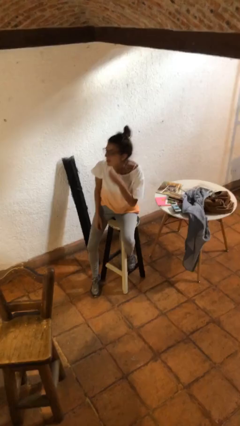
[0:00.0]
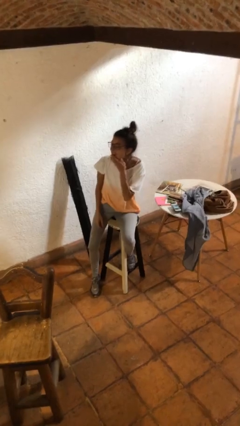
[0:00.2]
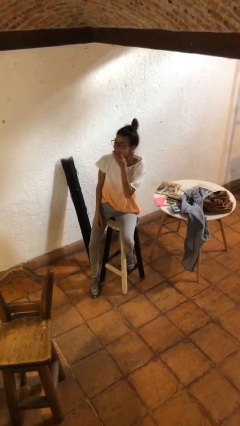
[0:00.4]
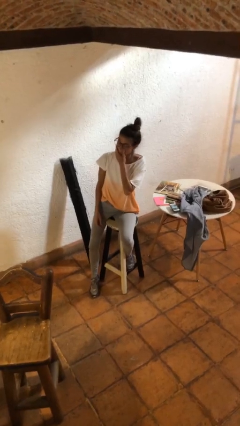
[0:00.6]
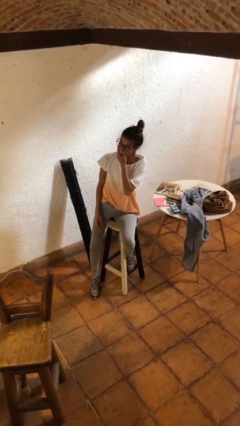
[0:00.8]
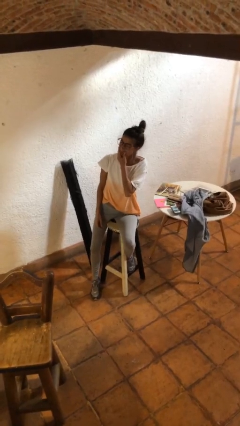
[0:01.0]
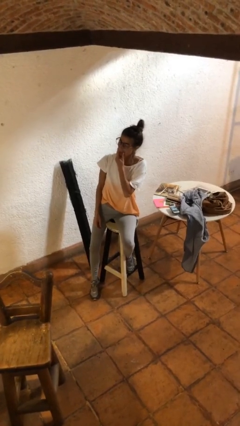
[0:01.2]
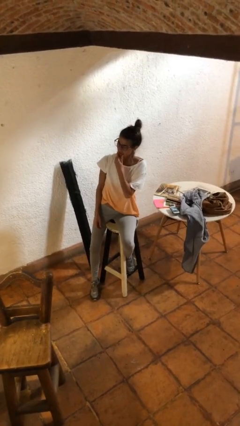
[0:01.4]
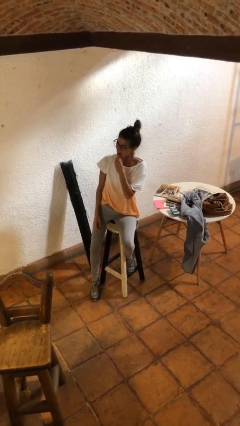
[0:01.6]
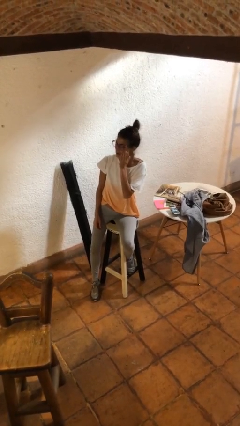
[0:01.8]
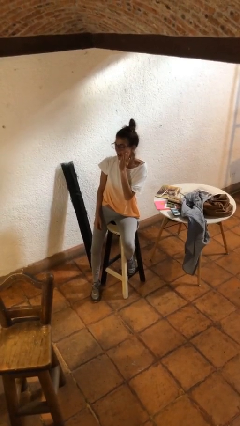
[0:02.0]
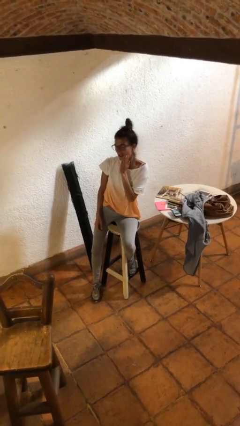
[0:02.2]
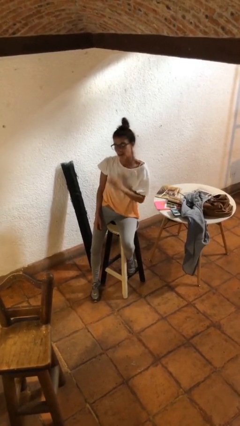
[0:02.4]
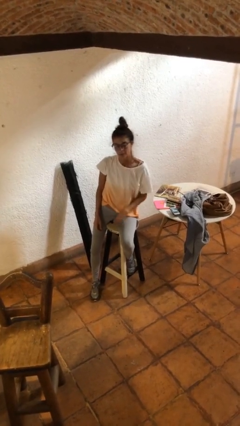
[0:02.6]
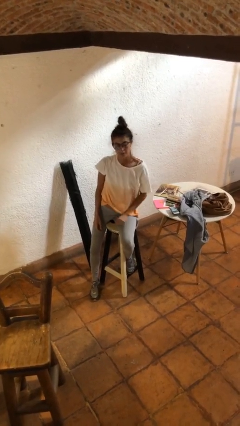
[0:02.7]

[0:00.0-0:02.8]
person scratches face

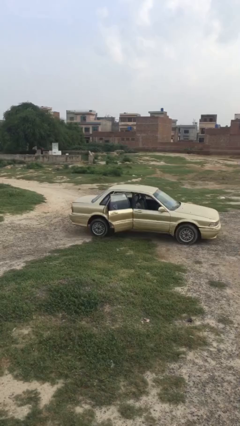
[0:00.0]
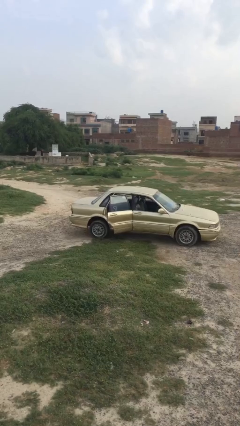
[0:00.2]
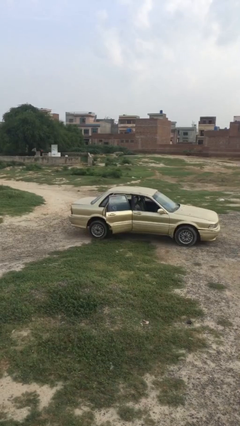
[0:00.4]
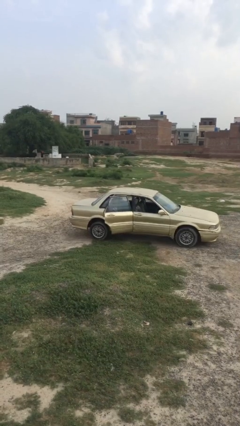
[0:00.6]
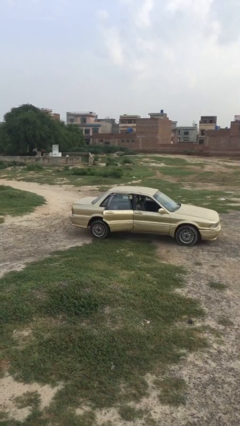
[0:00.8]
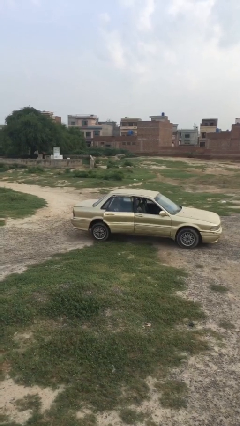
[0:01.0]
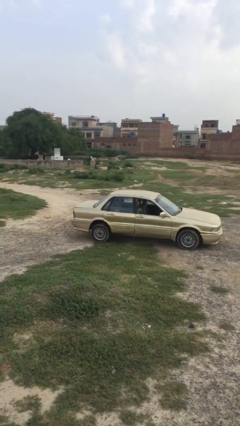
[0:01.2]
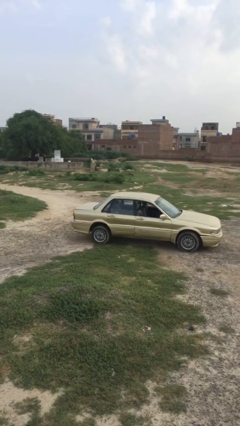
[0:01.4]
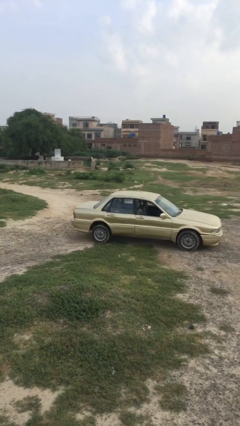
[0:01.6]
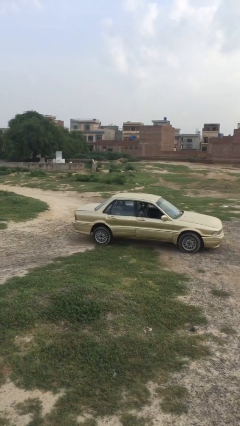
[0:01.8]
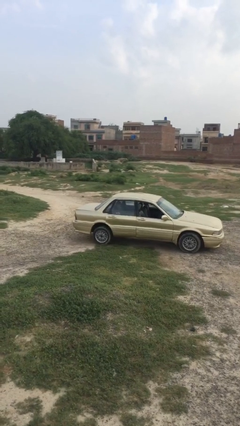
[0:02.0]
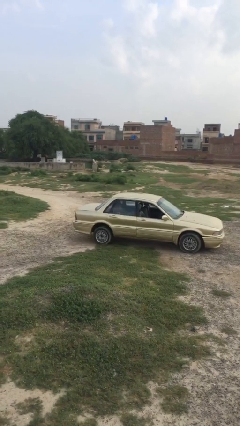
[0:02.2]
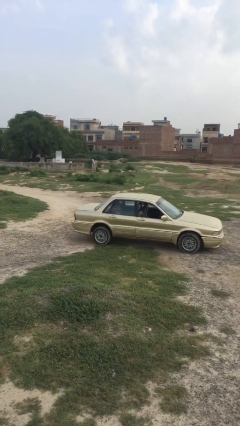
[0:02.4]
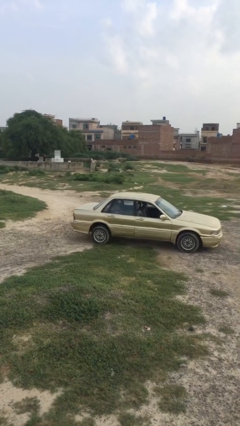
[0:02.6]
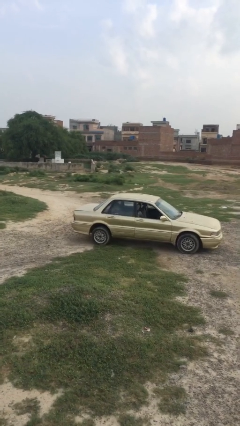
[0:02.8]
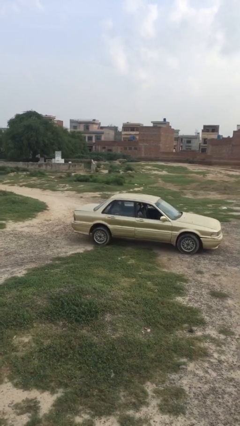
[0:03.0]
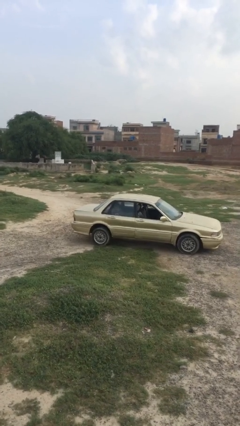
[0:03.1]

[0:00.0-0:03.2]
person closes car door

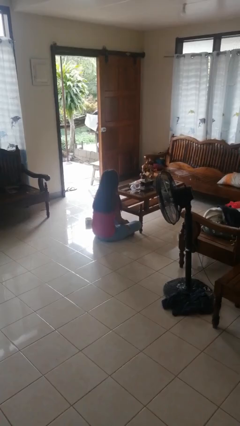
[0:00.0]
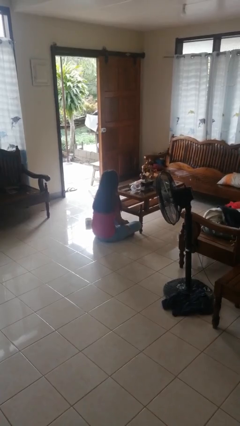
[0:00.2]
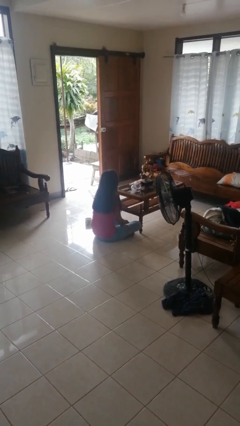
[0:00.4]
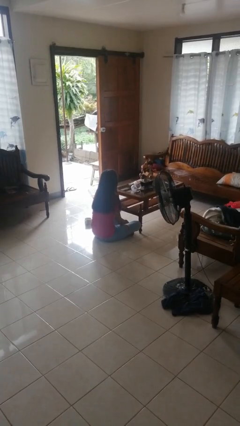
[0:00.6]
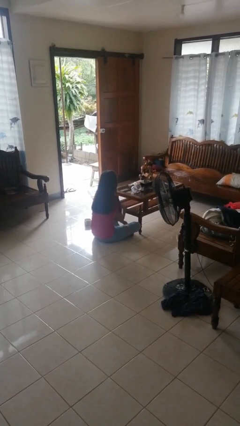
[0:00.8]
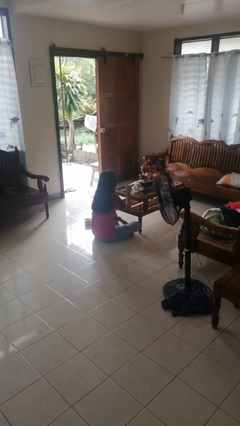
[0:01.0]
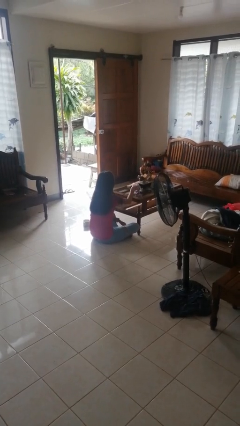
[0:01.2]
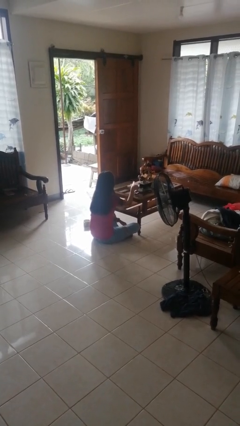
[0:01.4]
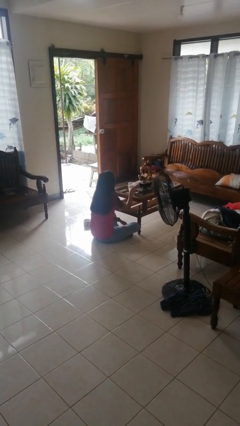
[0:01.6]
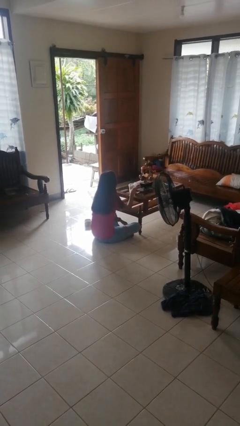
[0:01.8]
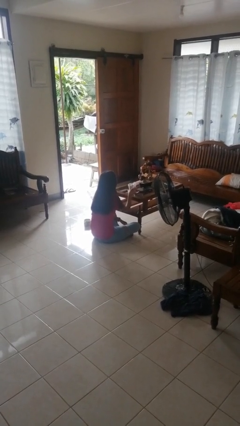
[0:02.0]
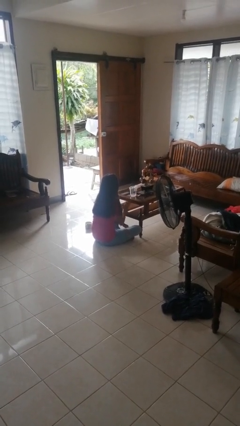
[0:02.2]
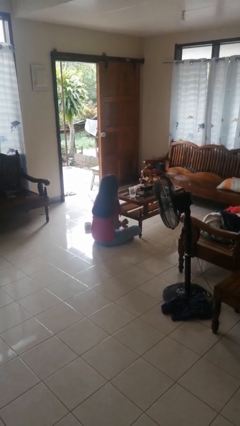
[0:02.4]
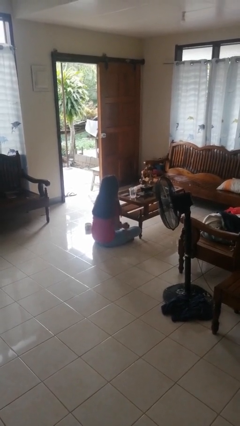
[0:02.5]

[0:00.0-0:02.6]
person sets upright glass

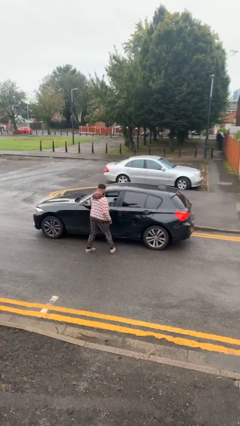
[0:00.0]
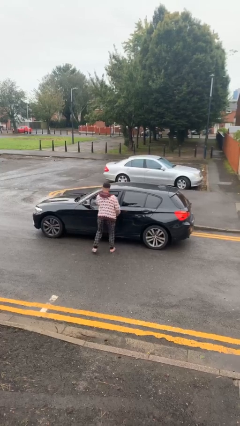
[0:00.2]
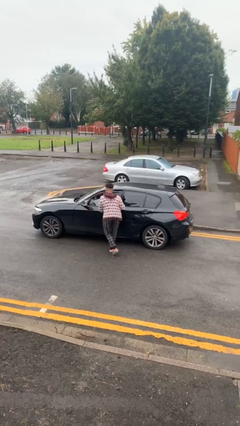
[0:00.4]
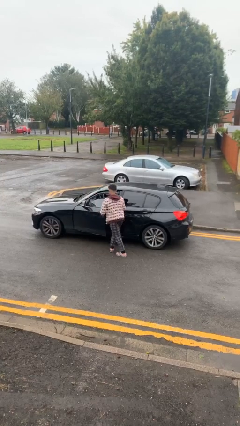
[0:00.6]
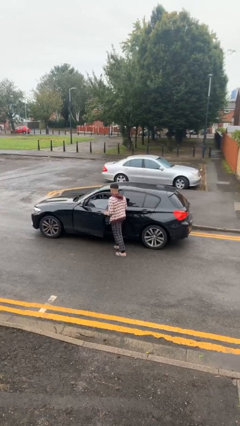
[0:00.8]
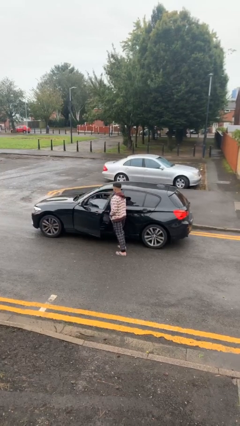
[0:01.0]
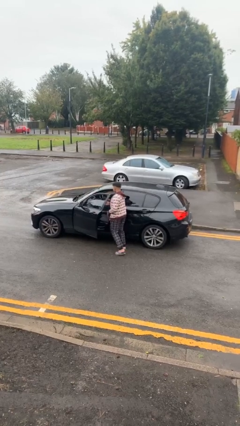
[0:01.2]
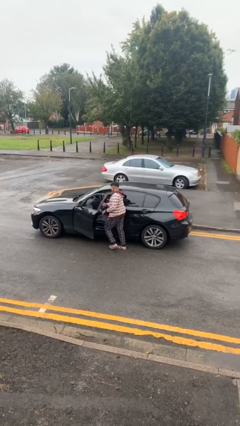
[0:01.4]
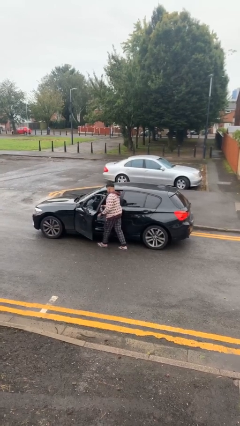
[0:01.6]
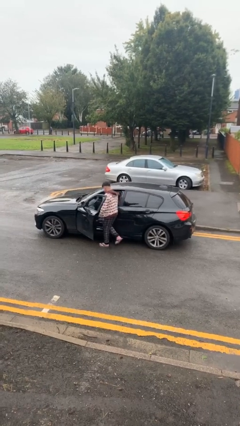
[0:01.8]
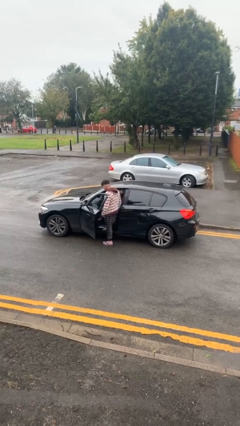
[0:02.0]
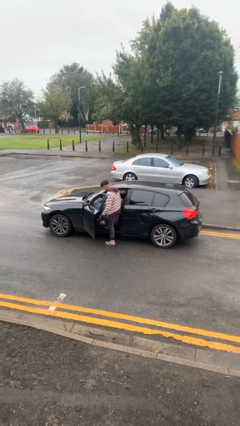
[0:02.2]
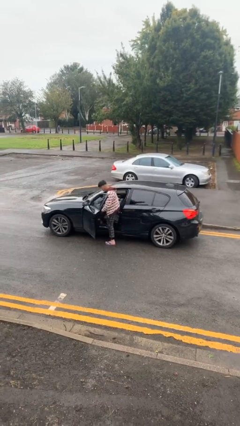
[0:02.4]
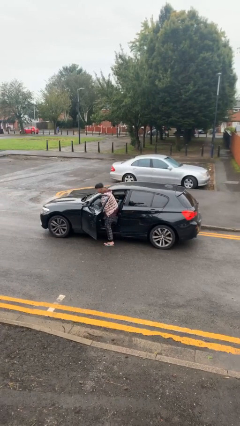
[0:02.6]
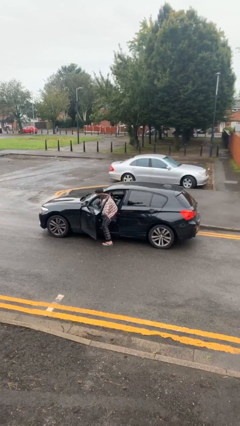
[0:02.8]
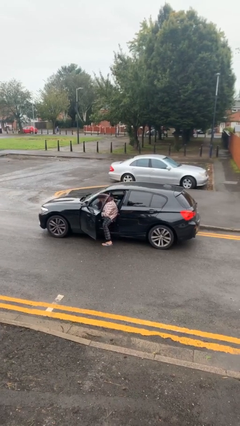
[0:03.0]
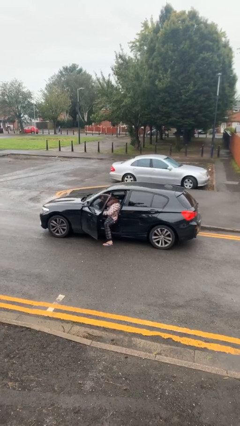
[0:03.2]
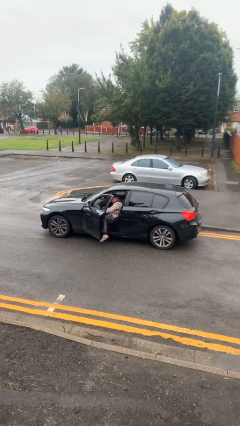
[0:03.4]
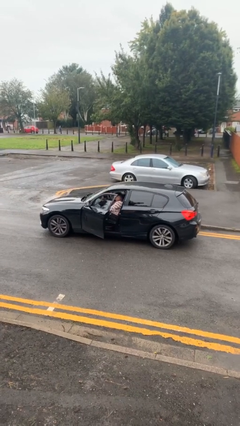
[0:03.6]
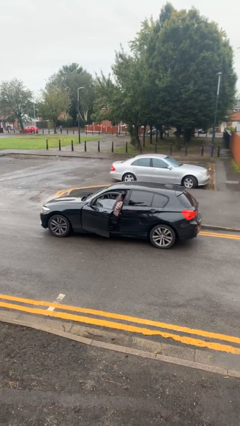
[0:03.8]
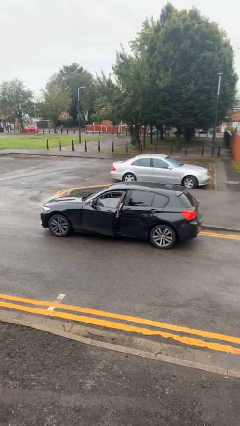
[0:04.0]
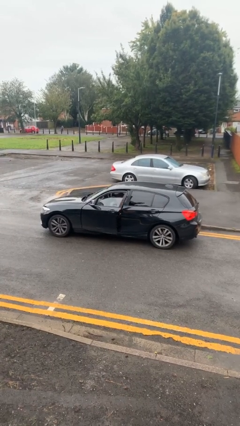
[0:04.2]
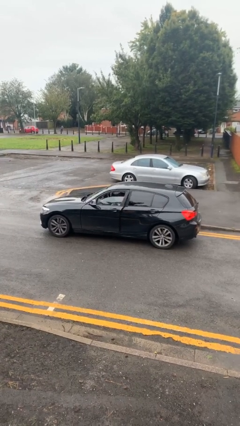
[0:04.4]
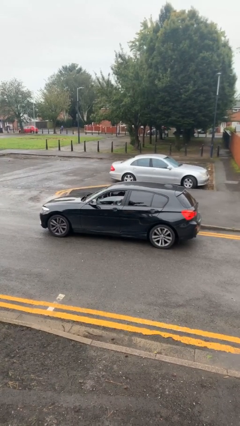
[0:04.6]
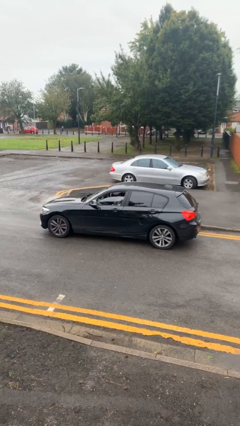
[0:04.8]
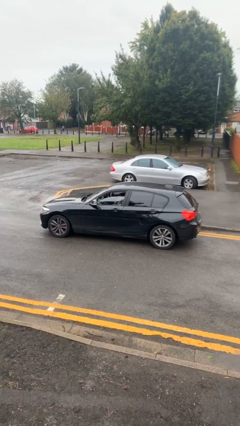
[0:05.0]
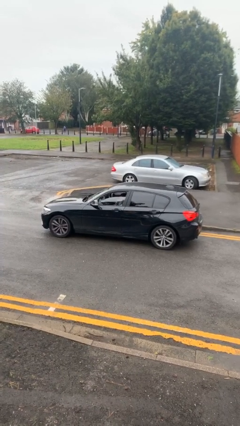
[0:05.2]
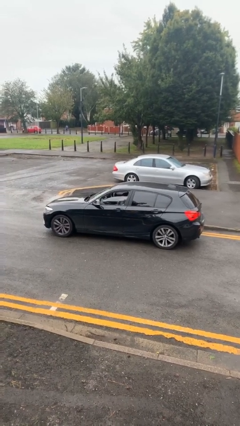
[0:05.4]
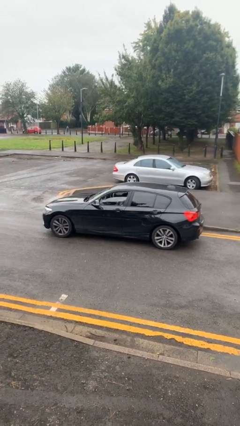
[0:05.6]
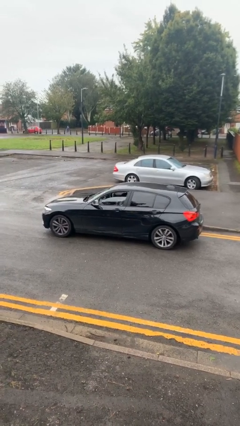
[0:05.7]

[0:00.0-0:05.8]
car picks up person

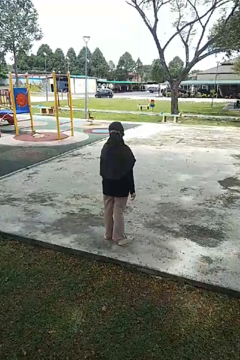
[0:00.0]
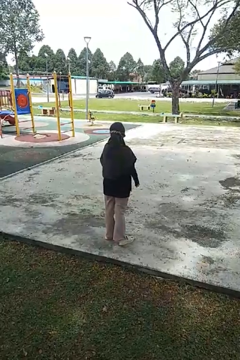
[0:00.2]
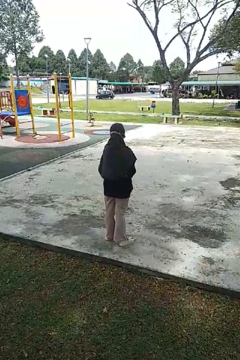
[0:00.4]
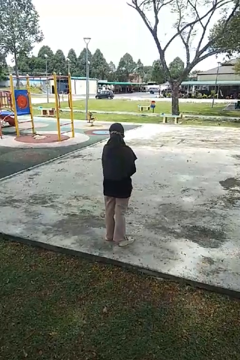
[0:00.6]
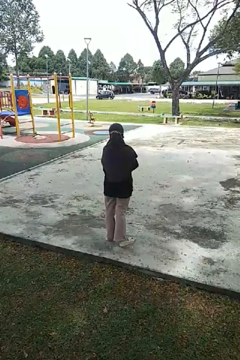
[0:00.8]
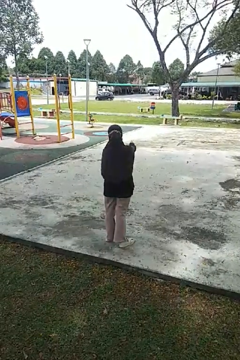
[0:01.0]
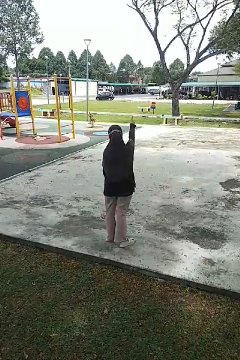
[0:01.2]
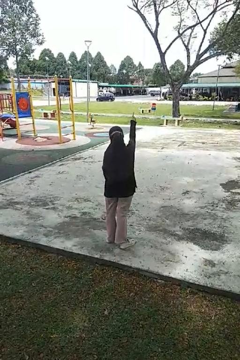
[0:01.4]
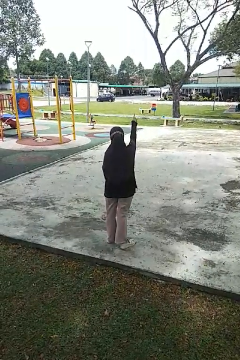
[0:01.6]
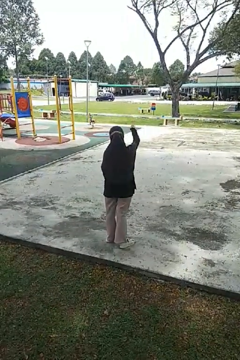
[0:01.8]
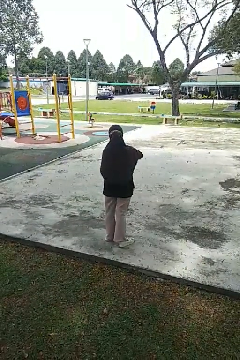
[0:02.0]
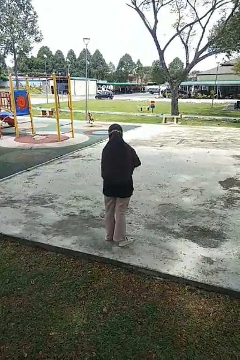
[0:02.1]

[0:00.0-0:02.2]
person points at person

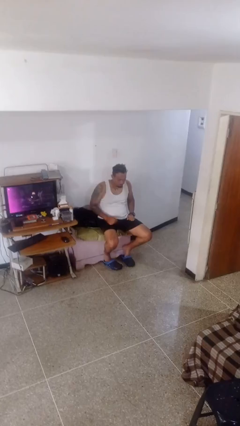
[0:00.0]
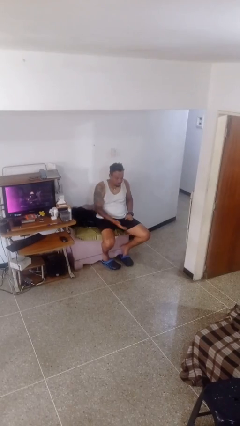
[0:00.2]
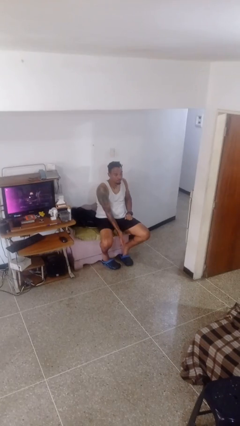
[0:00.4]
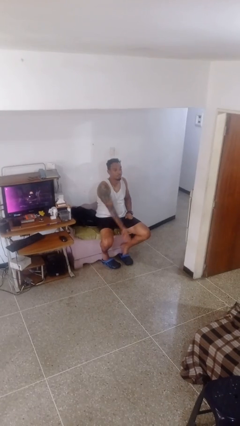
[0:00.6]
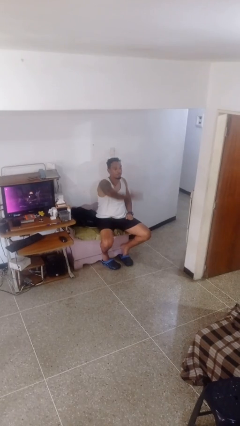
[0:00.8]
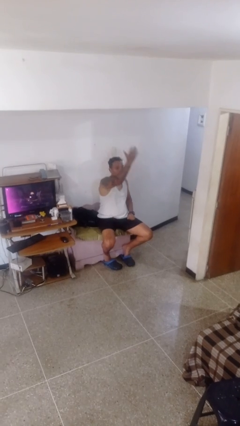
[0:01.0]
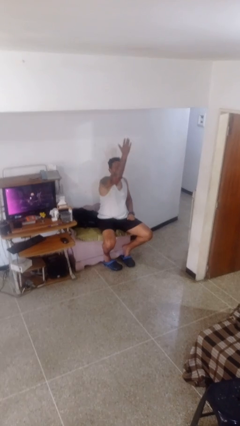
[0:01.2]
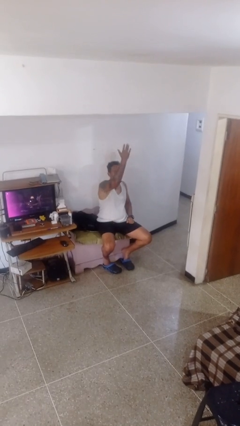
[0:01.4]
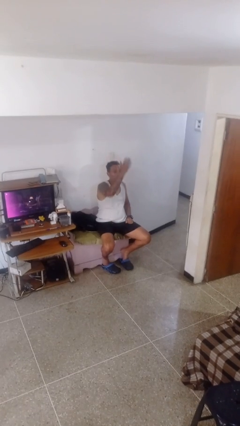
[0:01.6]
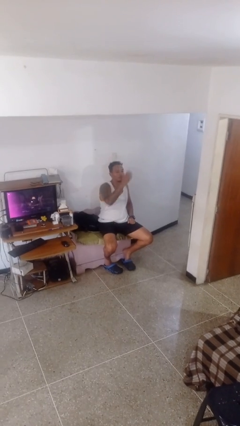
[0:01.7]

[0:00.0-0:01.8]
person gestures swipe up
